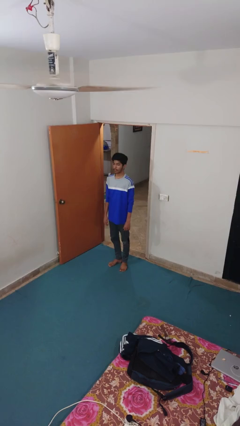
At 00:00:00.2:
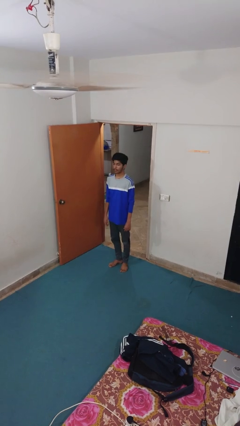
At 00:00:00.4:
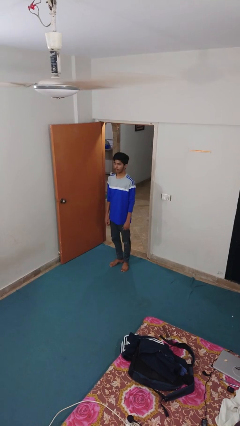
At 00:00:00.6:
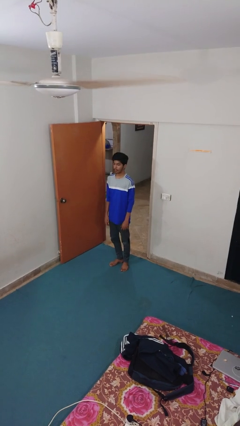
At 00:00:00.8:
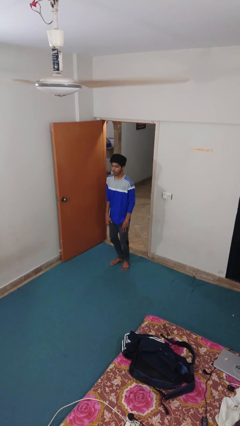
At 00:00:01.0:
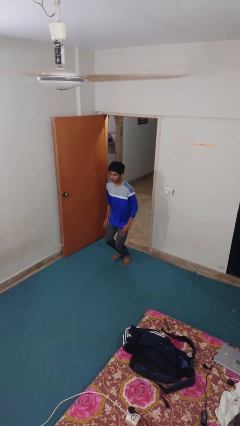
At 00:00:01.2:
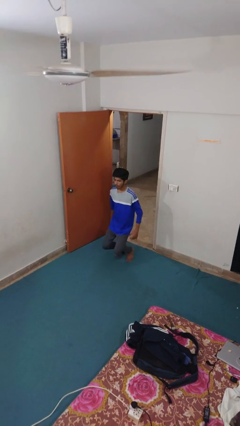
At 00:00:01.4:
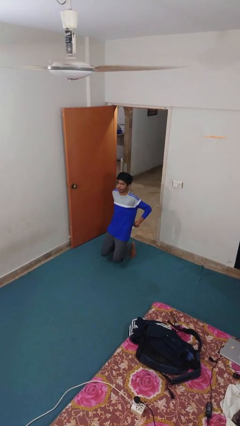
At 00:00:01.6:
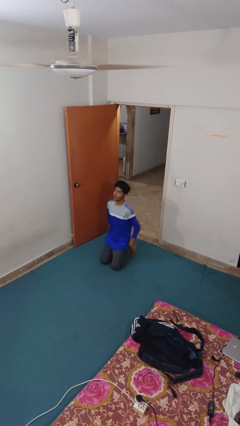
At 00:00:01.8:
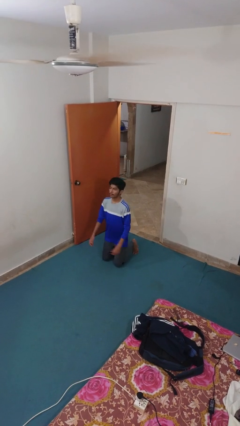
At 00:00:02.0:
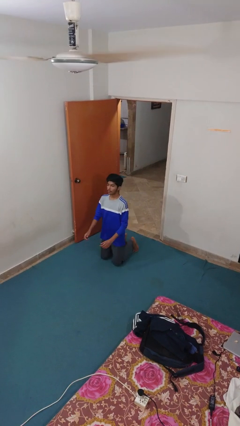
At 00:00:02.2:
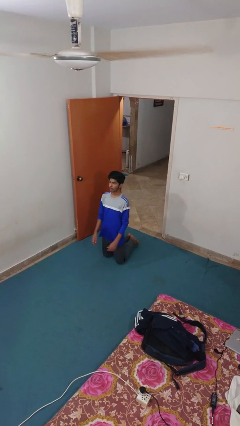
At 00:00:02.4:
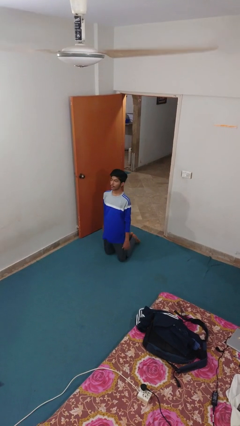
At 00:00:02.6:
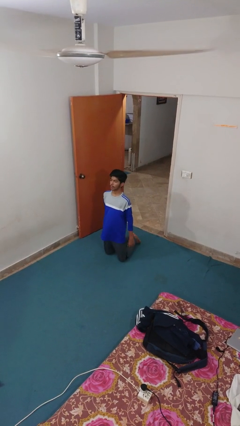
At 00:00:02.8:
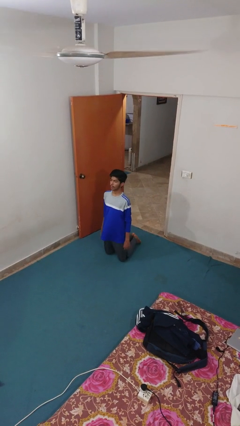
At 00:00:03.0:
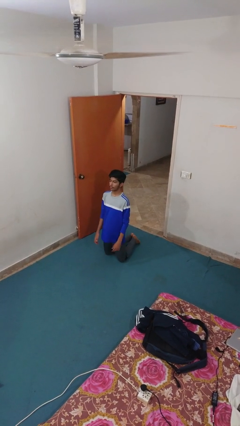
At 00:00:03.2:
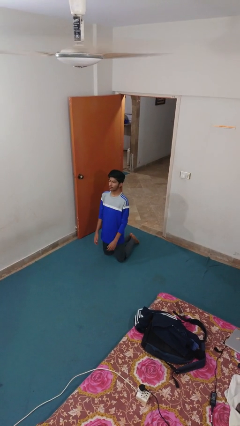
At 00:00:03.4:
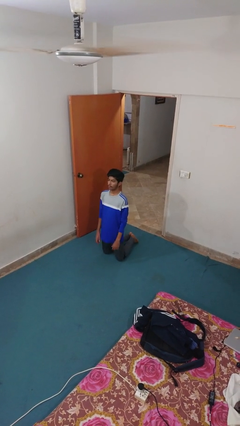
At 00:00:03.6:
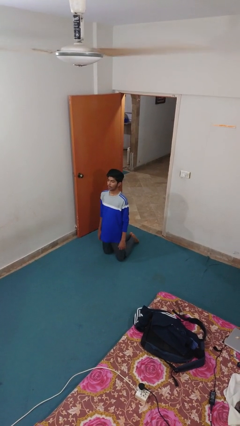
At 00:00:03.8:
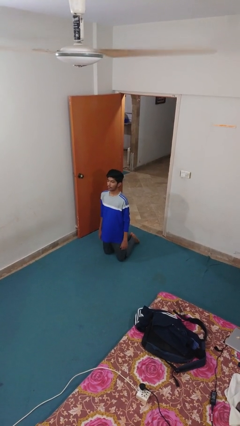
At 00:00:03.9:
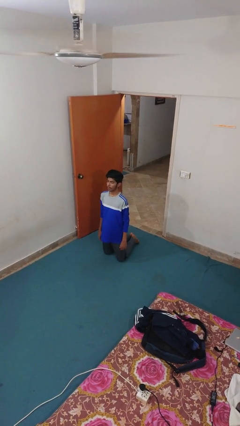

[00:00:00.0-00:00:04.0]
person kneels

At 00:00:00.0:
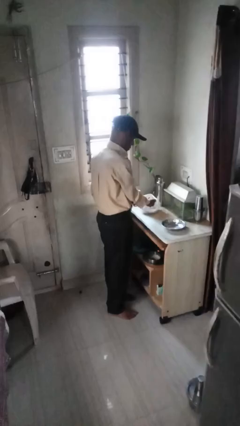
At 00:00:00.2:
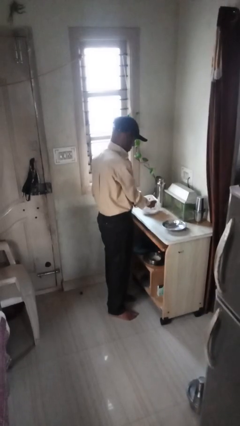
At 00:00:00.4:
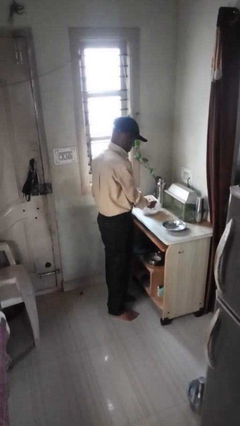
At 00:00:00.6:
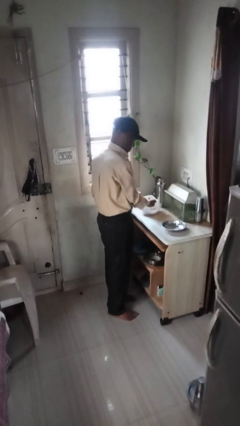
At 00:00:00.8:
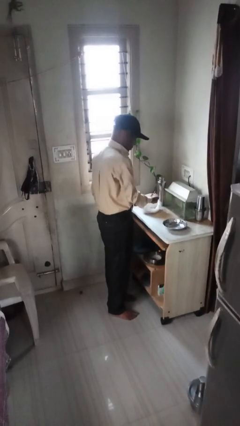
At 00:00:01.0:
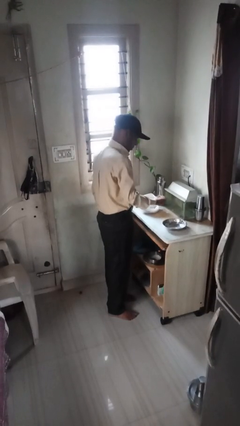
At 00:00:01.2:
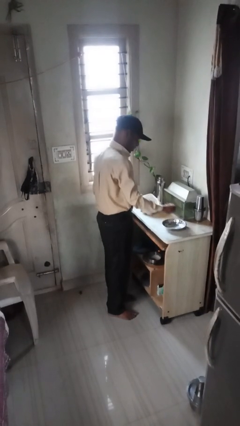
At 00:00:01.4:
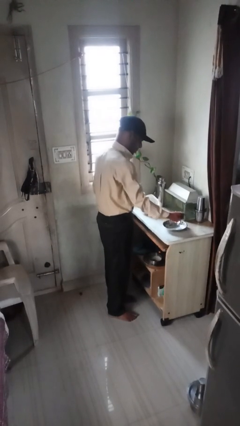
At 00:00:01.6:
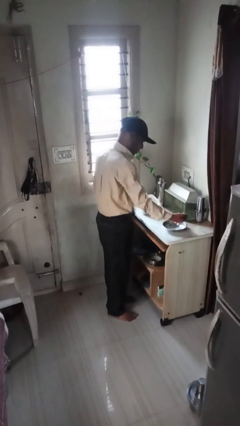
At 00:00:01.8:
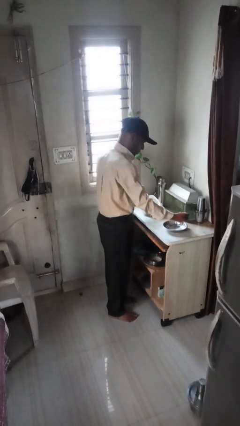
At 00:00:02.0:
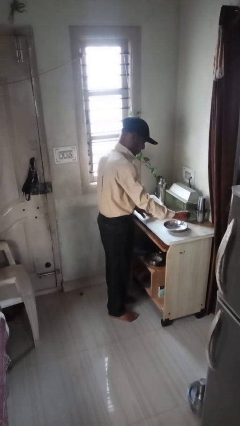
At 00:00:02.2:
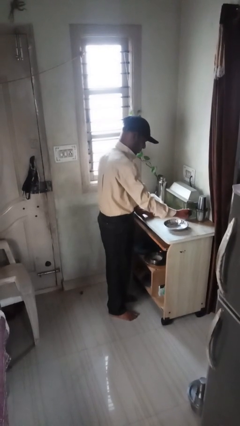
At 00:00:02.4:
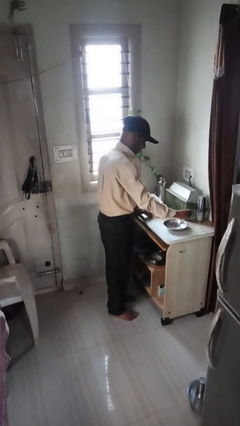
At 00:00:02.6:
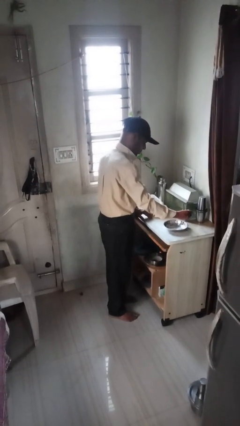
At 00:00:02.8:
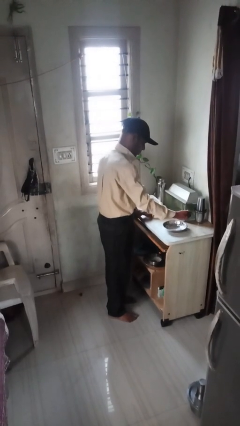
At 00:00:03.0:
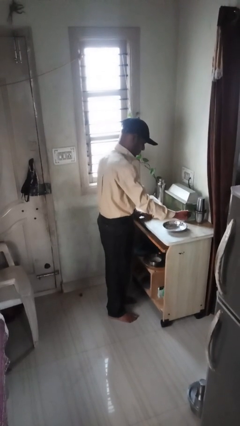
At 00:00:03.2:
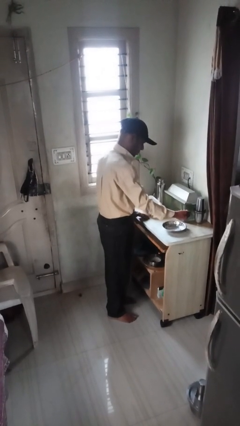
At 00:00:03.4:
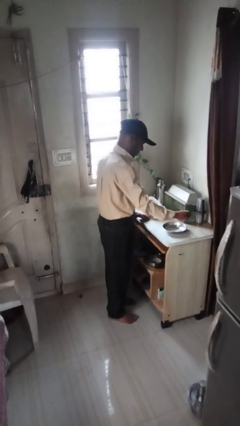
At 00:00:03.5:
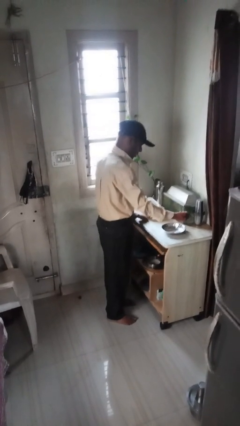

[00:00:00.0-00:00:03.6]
person pours into bowl

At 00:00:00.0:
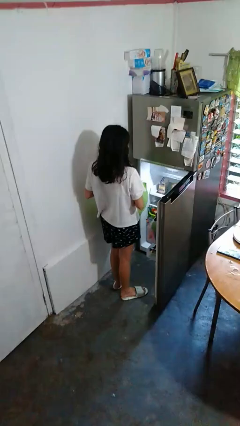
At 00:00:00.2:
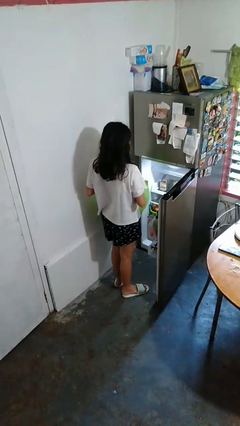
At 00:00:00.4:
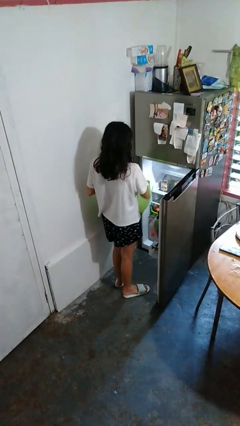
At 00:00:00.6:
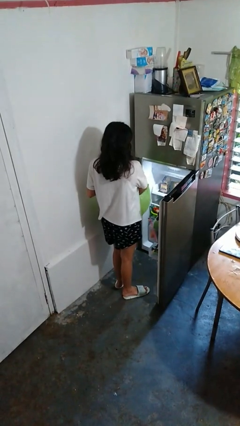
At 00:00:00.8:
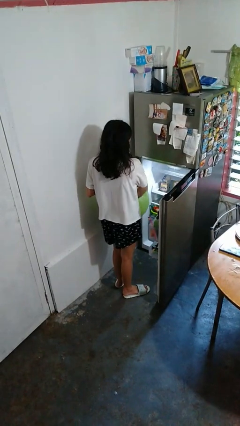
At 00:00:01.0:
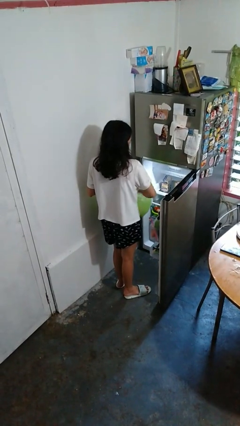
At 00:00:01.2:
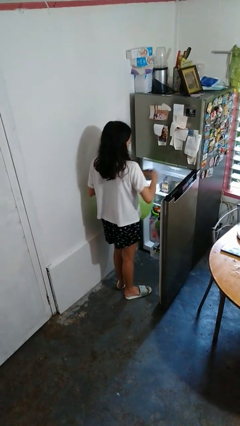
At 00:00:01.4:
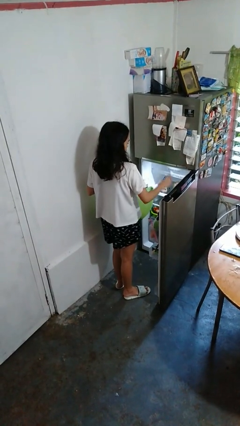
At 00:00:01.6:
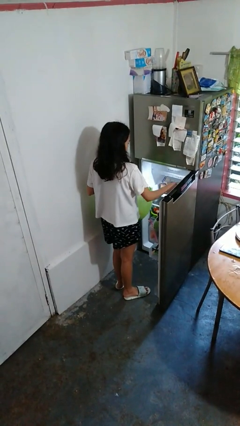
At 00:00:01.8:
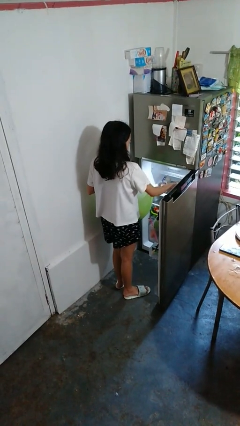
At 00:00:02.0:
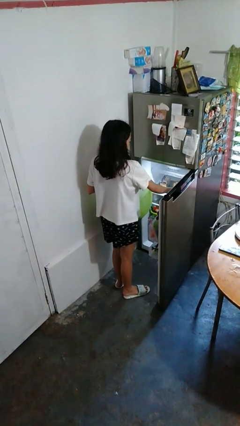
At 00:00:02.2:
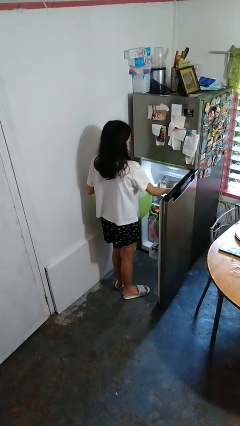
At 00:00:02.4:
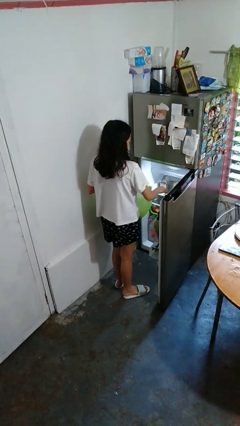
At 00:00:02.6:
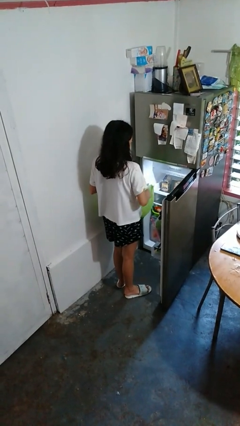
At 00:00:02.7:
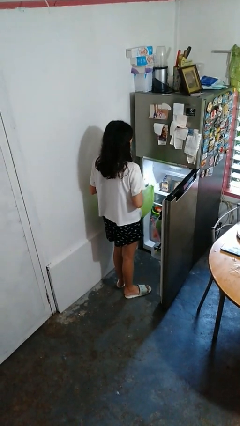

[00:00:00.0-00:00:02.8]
person loads groceries into refrigerator

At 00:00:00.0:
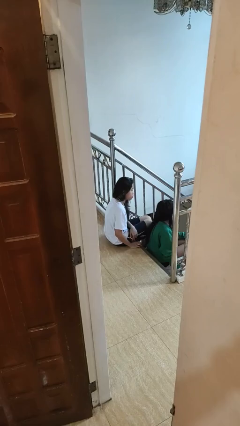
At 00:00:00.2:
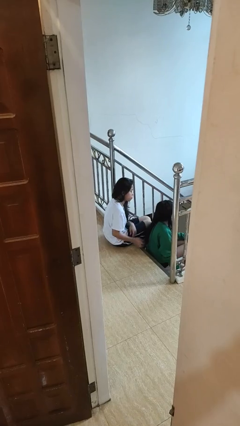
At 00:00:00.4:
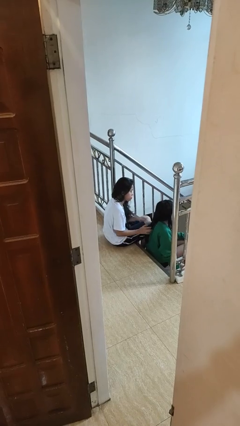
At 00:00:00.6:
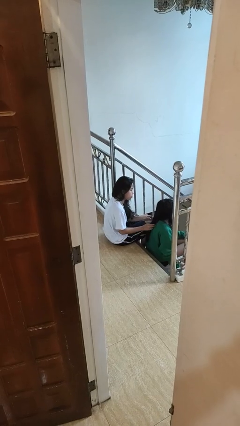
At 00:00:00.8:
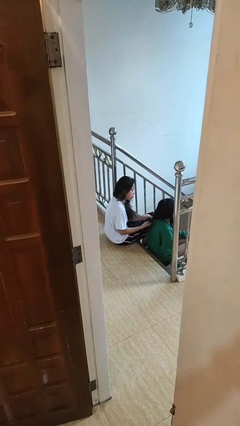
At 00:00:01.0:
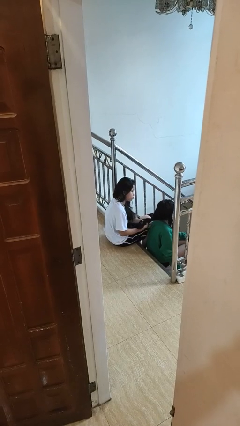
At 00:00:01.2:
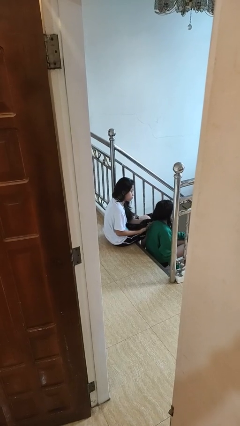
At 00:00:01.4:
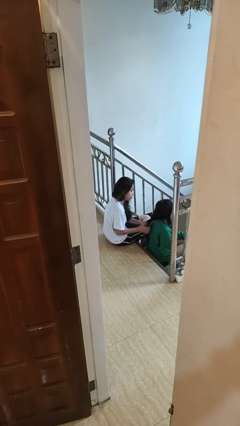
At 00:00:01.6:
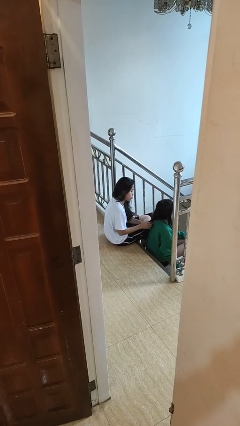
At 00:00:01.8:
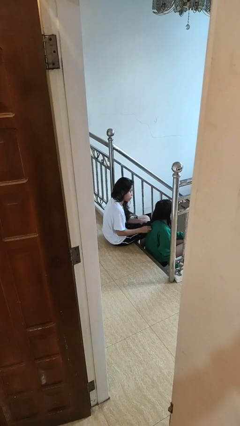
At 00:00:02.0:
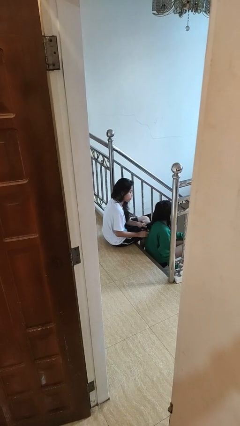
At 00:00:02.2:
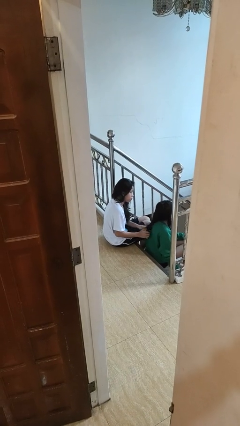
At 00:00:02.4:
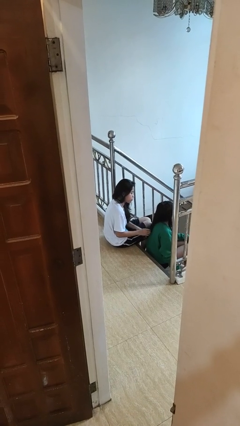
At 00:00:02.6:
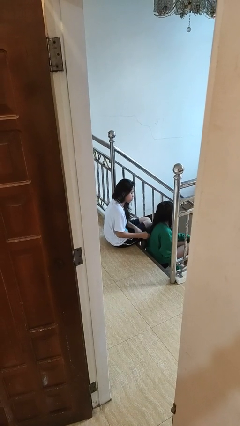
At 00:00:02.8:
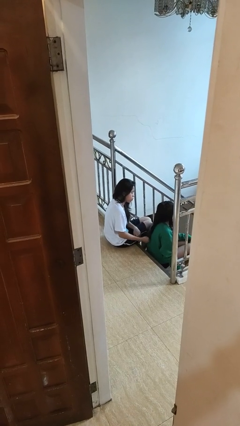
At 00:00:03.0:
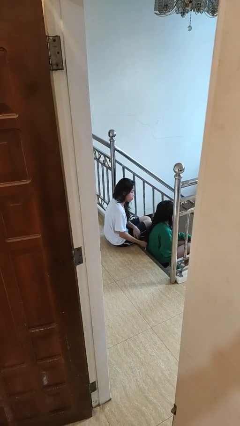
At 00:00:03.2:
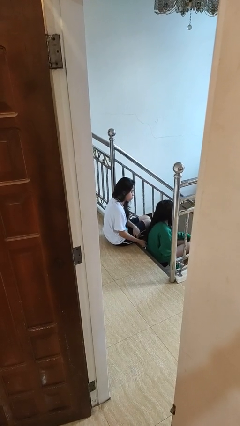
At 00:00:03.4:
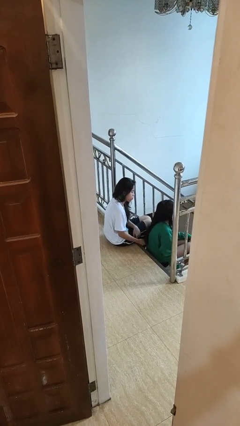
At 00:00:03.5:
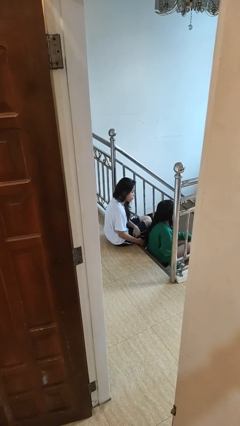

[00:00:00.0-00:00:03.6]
person braids hair of person

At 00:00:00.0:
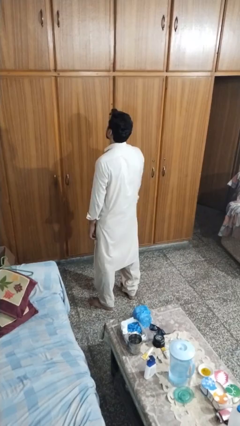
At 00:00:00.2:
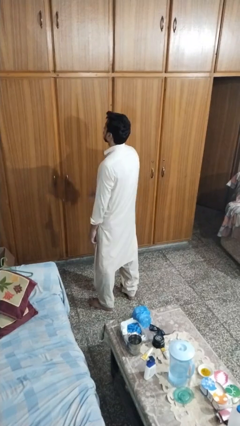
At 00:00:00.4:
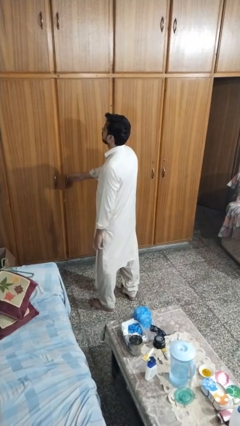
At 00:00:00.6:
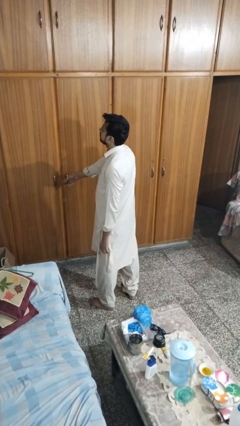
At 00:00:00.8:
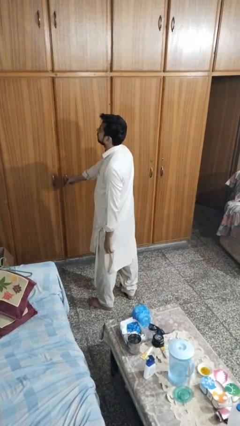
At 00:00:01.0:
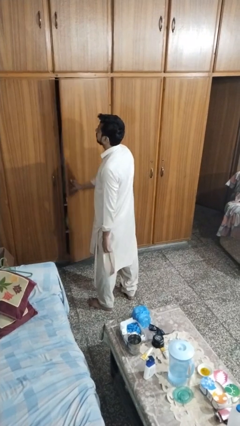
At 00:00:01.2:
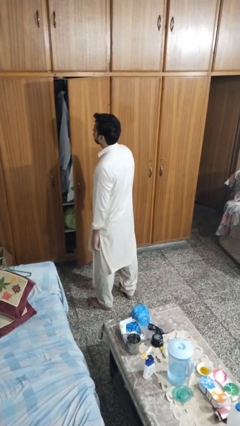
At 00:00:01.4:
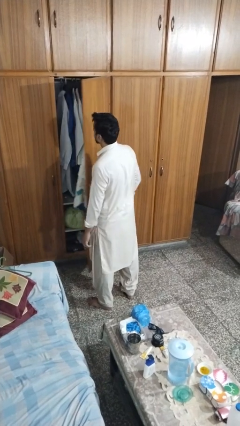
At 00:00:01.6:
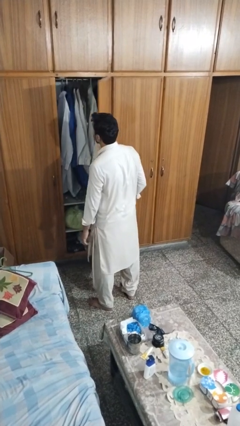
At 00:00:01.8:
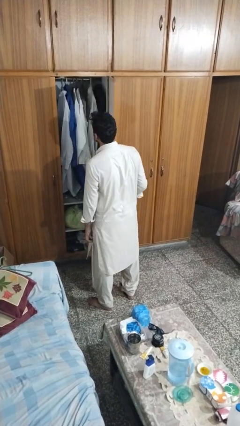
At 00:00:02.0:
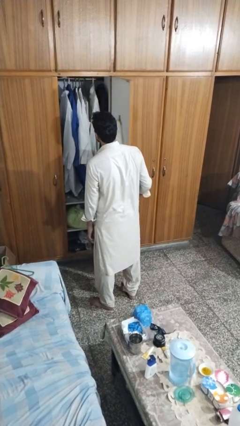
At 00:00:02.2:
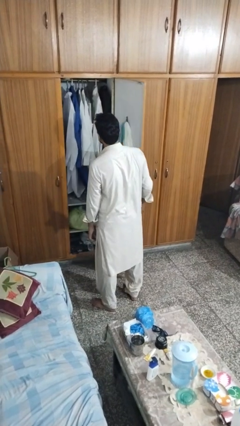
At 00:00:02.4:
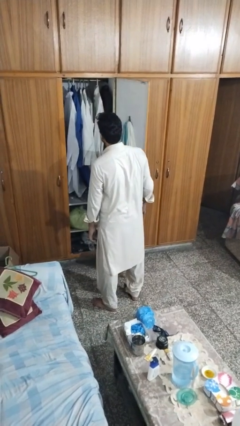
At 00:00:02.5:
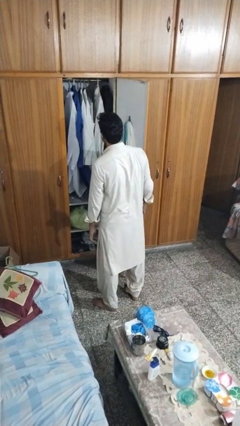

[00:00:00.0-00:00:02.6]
person opens closet door

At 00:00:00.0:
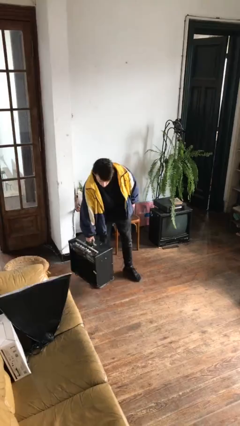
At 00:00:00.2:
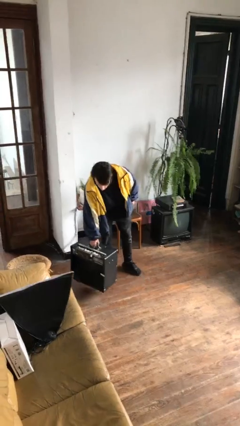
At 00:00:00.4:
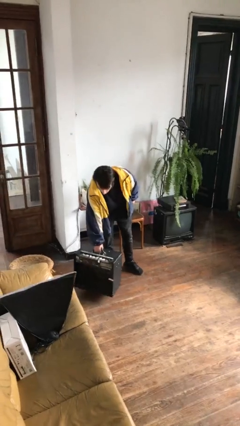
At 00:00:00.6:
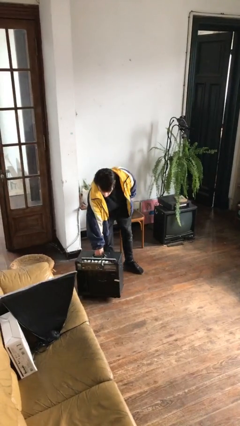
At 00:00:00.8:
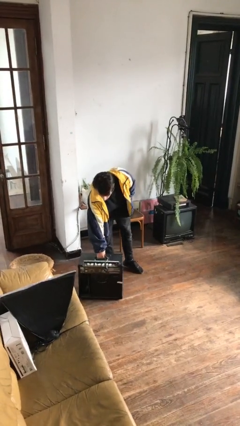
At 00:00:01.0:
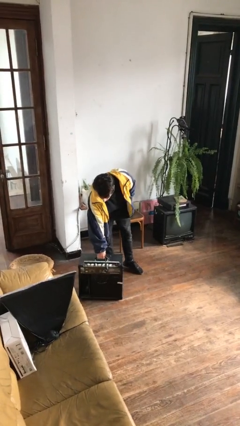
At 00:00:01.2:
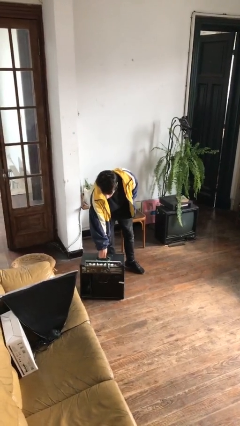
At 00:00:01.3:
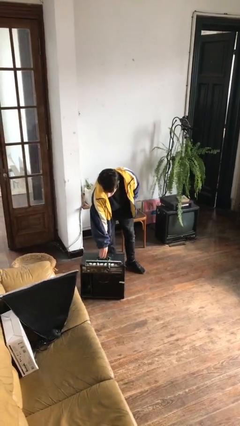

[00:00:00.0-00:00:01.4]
person puts down object on floor
